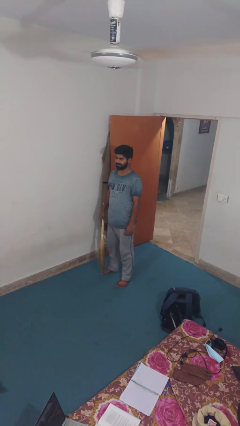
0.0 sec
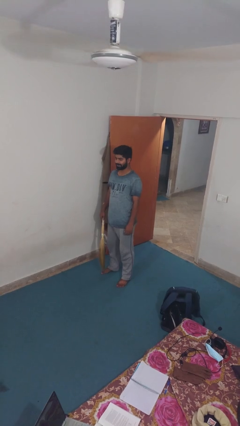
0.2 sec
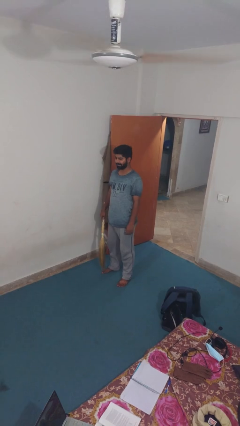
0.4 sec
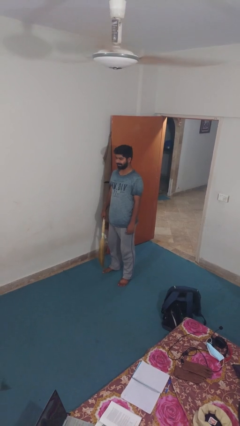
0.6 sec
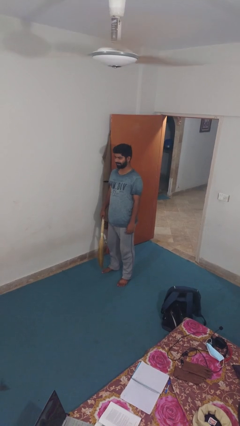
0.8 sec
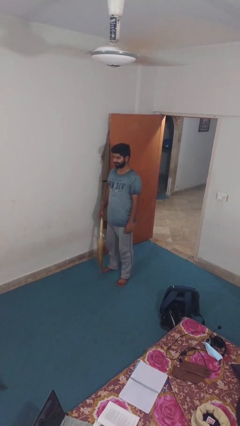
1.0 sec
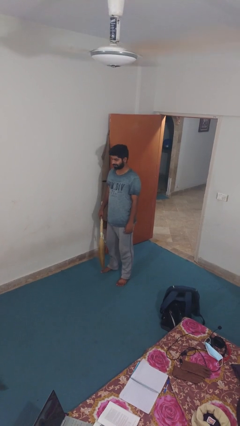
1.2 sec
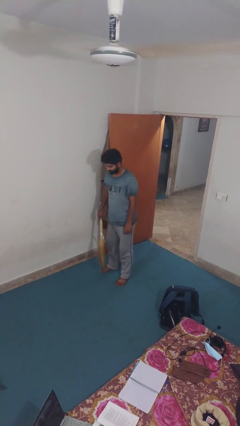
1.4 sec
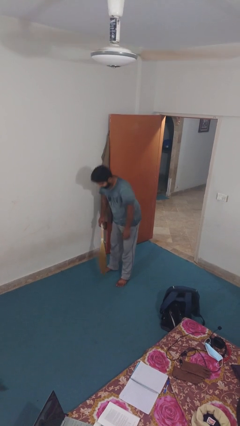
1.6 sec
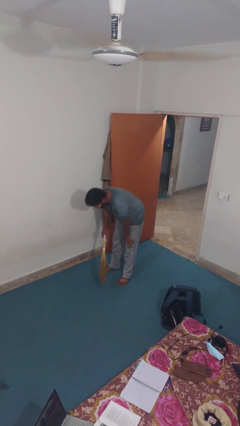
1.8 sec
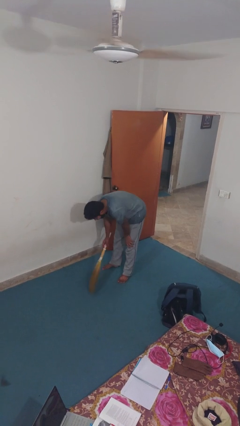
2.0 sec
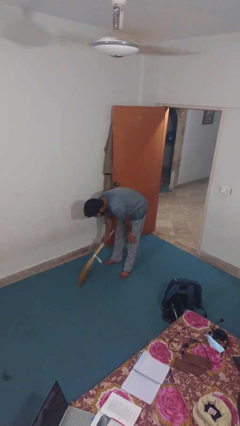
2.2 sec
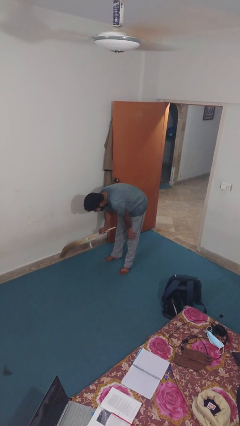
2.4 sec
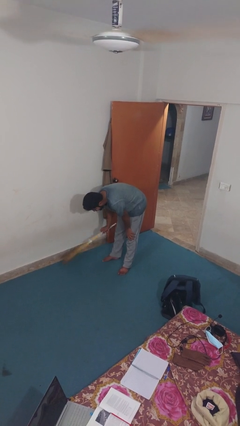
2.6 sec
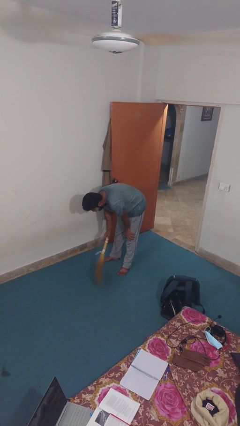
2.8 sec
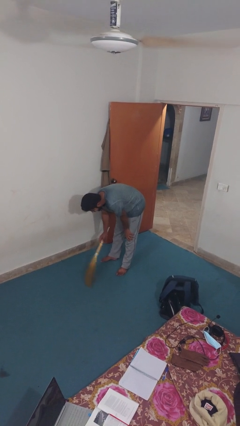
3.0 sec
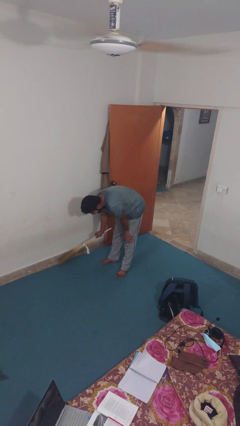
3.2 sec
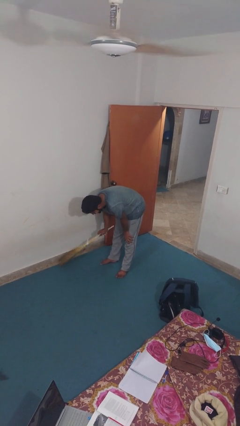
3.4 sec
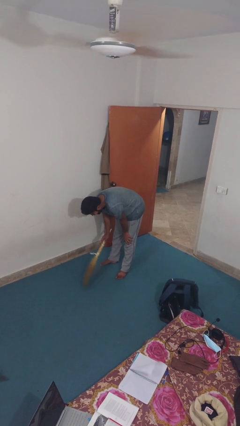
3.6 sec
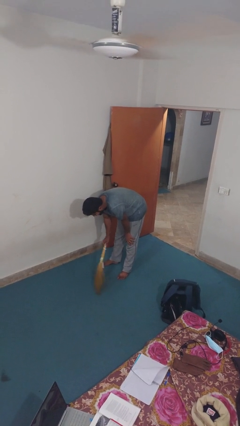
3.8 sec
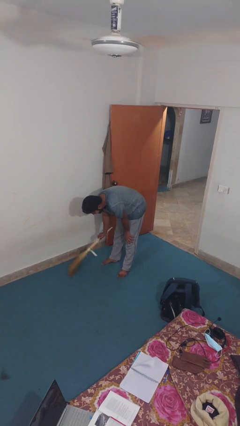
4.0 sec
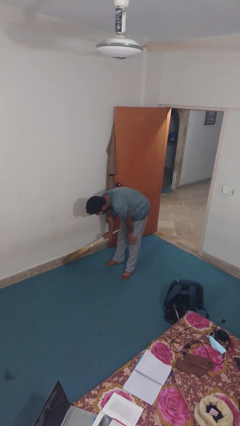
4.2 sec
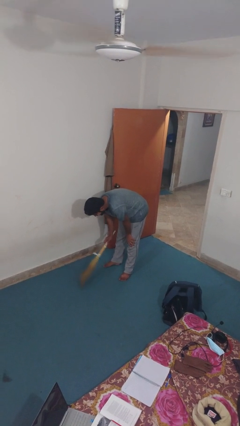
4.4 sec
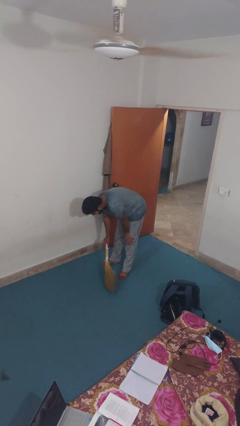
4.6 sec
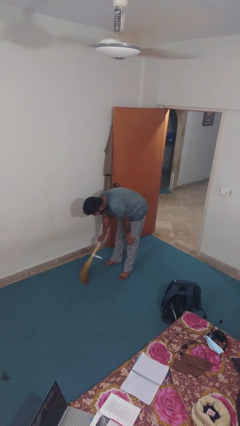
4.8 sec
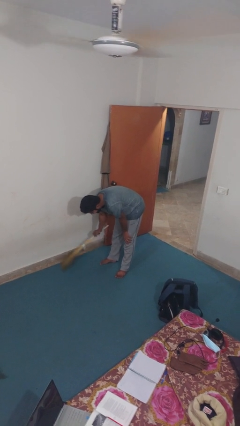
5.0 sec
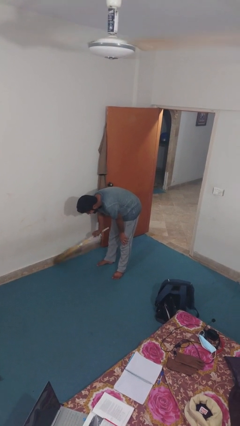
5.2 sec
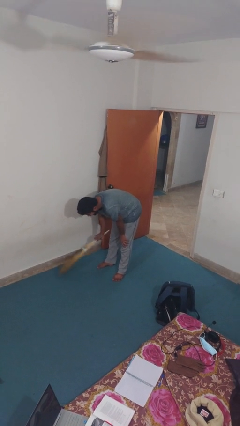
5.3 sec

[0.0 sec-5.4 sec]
person sweeps floor

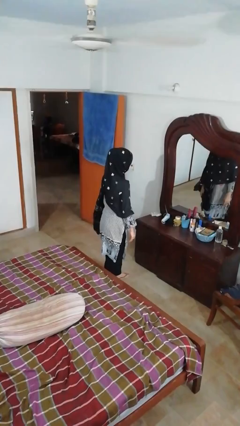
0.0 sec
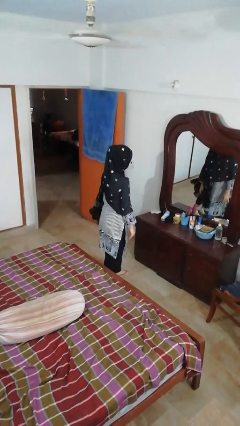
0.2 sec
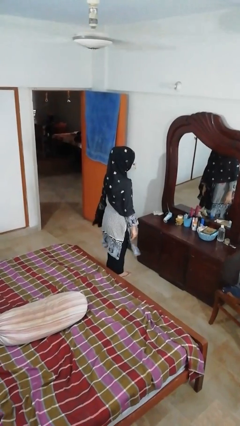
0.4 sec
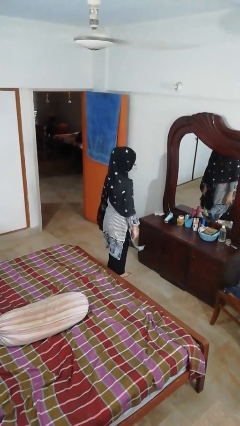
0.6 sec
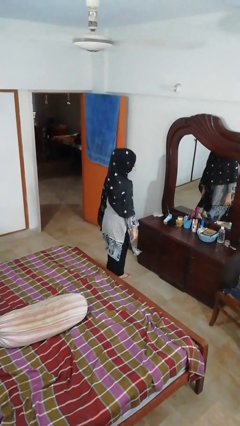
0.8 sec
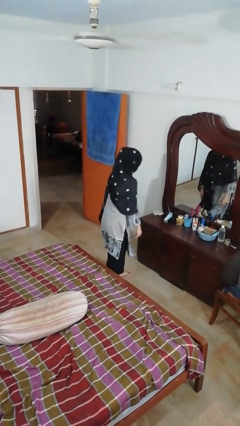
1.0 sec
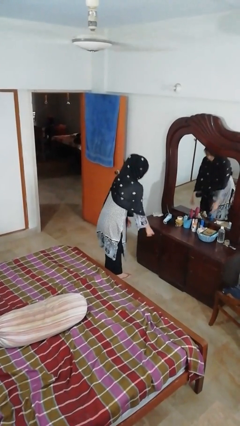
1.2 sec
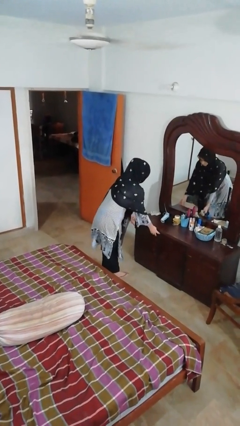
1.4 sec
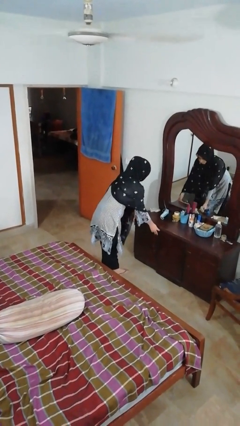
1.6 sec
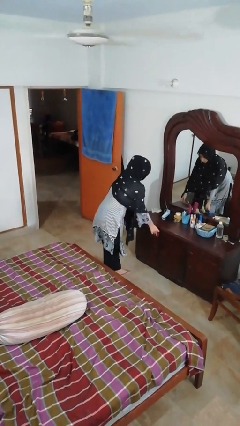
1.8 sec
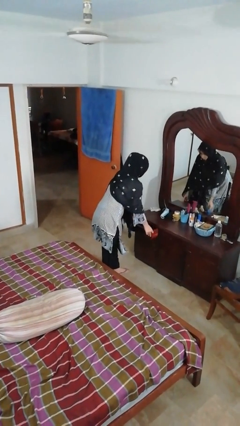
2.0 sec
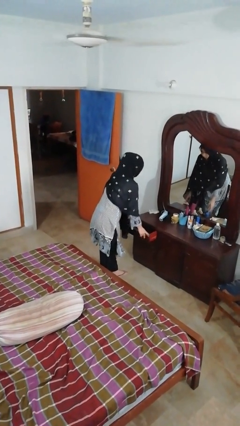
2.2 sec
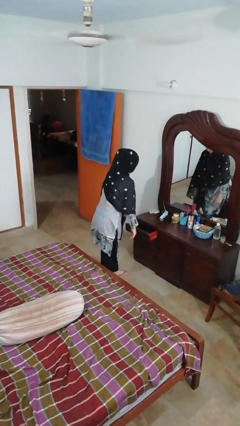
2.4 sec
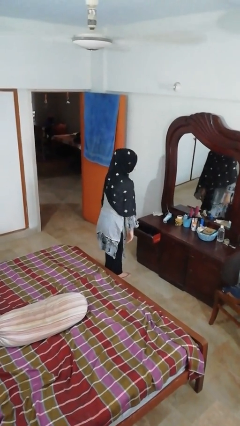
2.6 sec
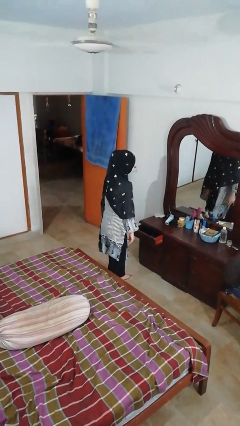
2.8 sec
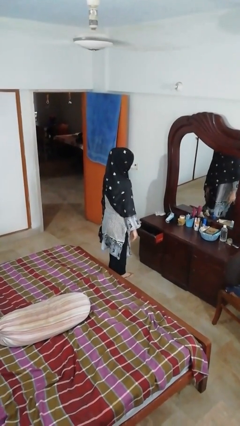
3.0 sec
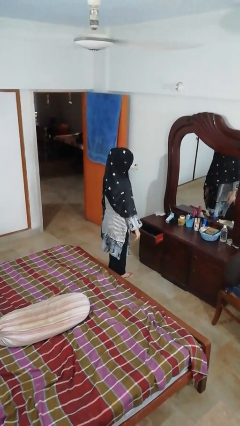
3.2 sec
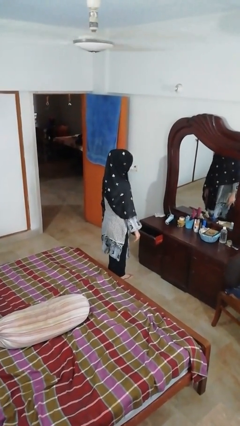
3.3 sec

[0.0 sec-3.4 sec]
person opens dresser drawer

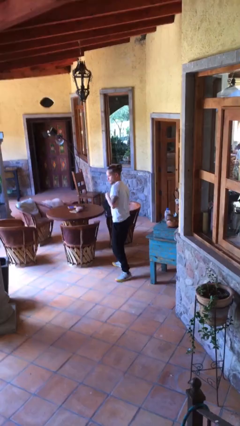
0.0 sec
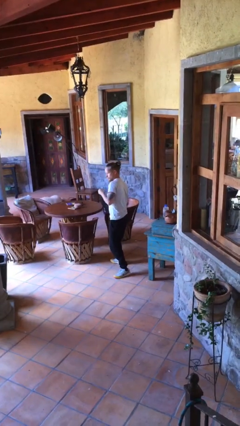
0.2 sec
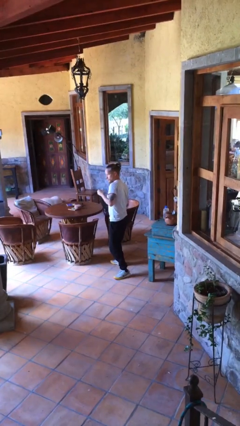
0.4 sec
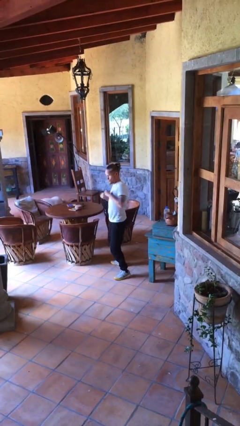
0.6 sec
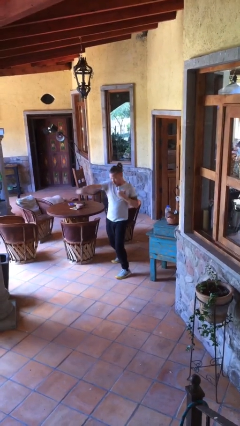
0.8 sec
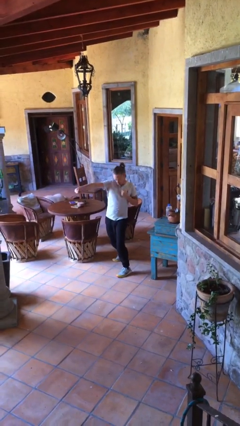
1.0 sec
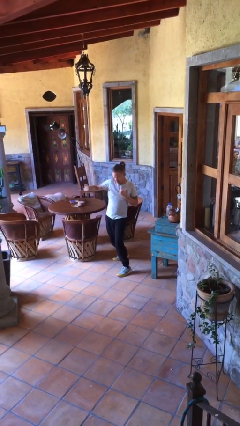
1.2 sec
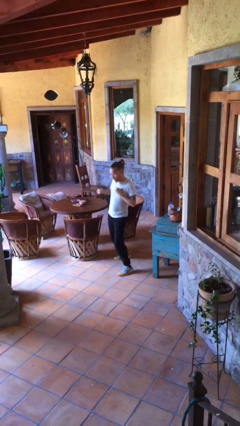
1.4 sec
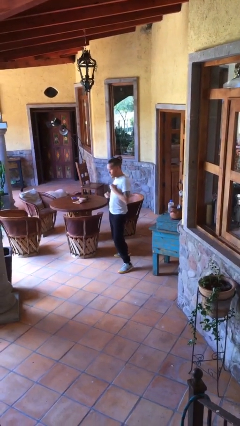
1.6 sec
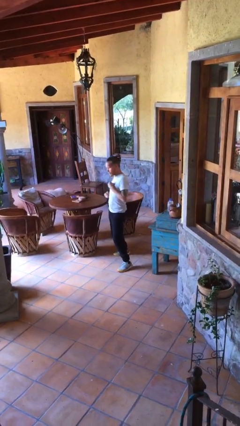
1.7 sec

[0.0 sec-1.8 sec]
person karate chop

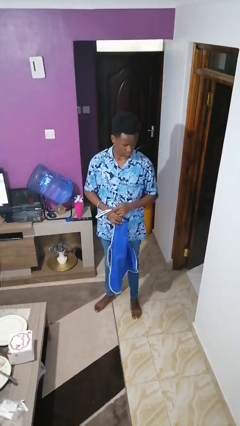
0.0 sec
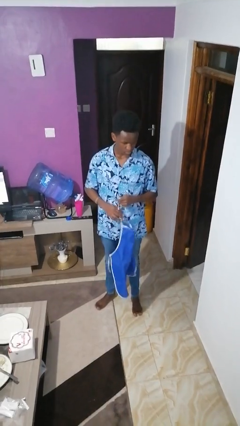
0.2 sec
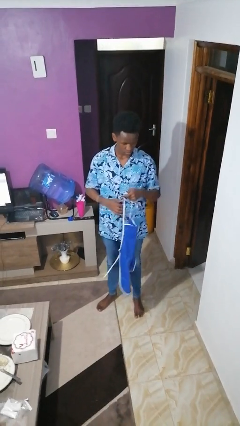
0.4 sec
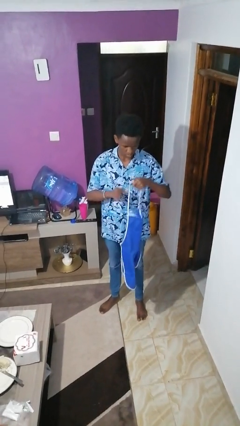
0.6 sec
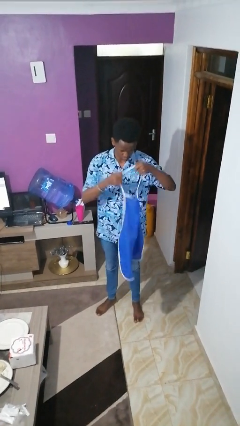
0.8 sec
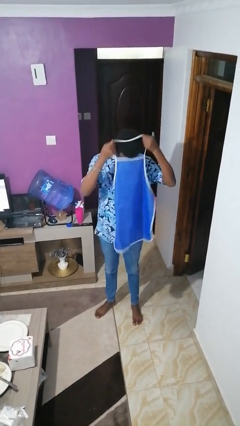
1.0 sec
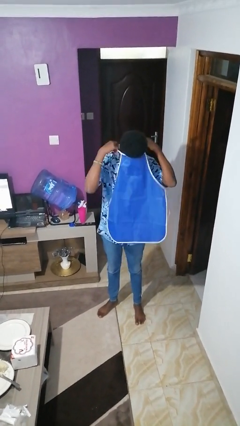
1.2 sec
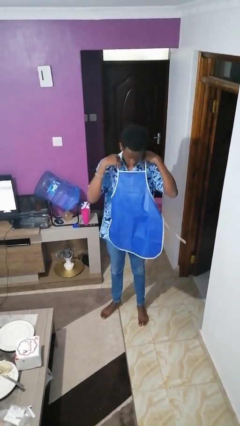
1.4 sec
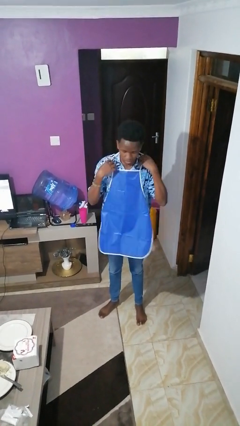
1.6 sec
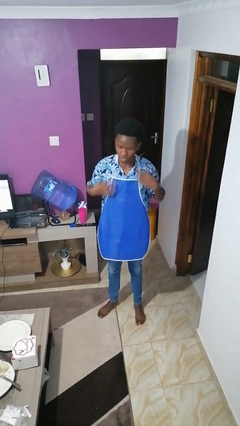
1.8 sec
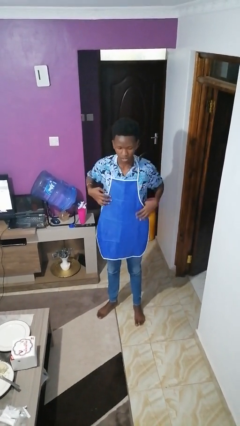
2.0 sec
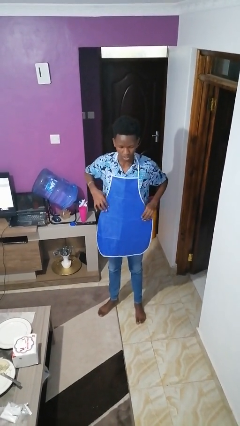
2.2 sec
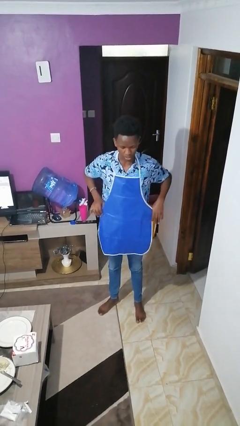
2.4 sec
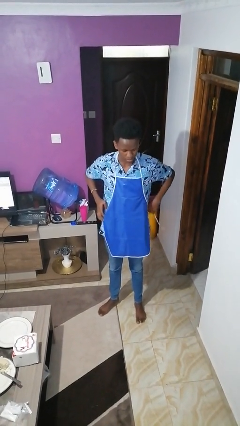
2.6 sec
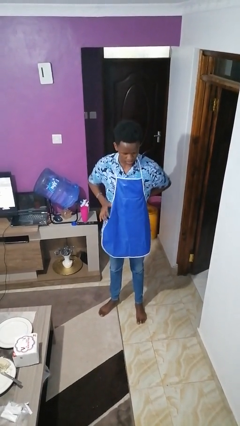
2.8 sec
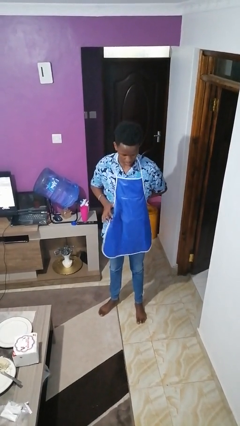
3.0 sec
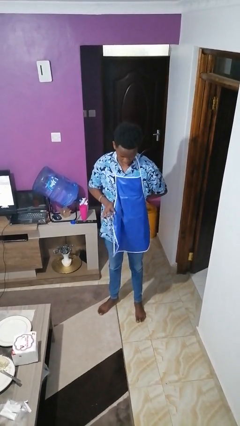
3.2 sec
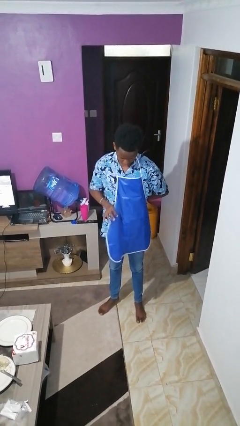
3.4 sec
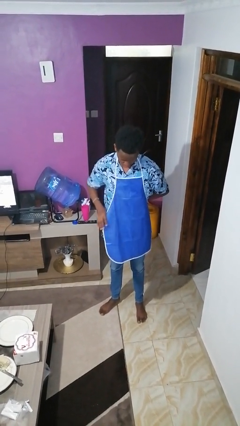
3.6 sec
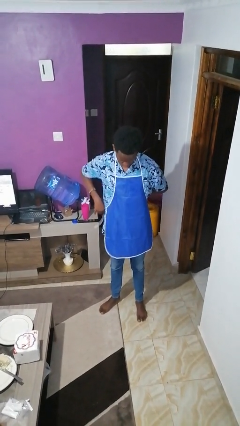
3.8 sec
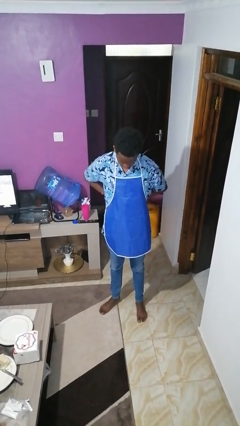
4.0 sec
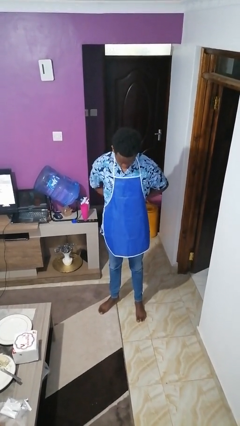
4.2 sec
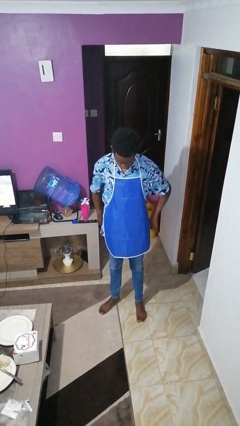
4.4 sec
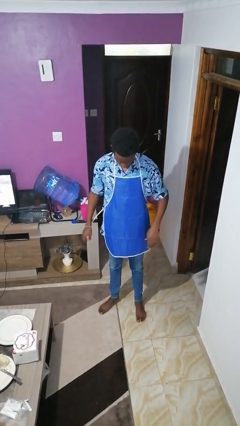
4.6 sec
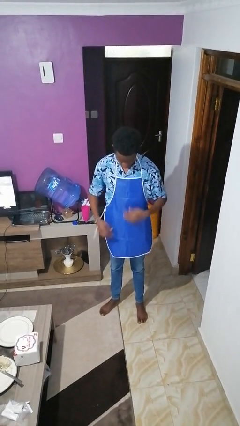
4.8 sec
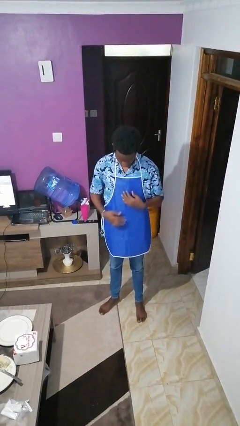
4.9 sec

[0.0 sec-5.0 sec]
person puts on apron

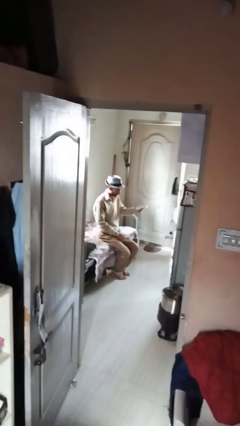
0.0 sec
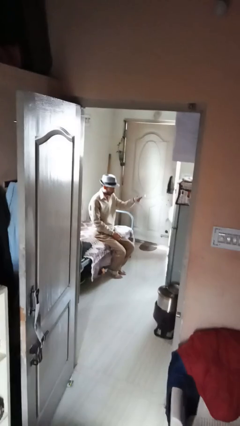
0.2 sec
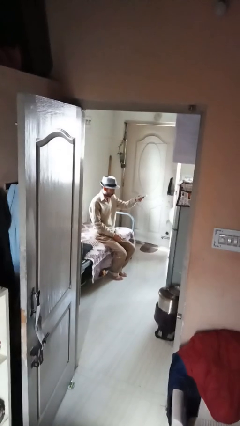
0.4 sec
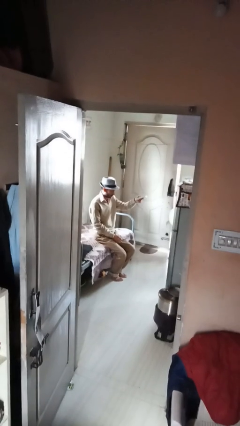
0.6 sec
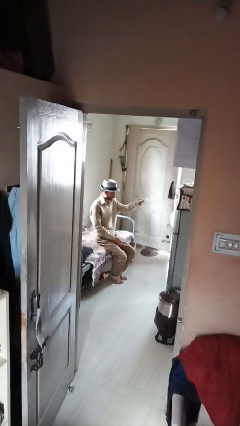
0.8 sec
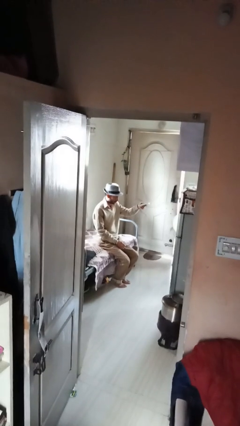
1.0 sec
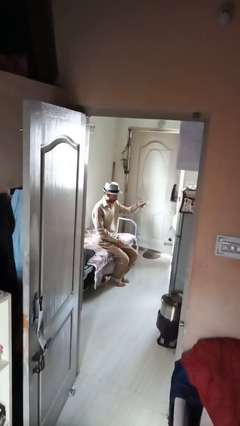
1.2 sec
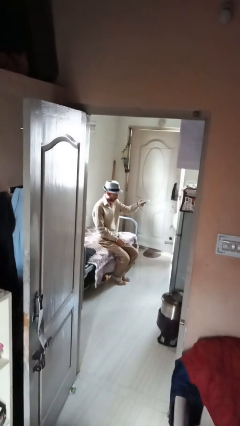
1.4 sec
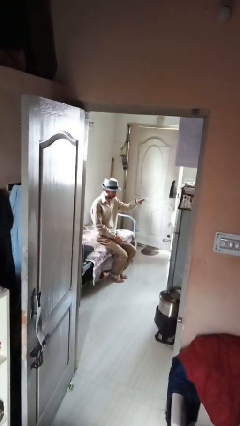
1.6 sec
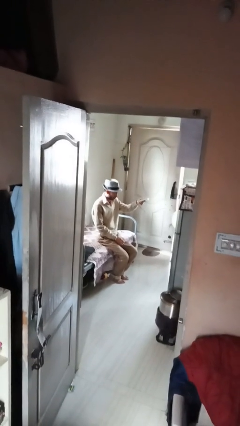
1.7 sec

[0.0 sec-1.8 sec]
person uses television remote
